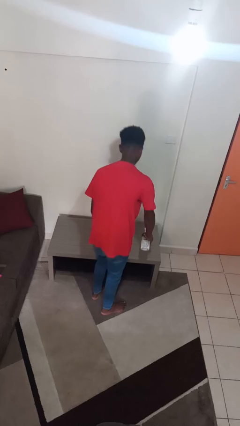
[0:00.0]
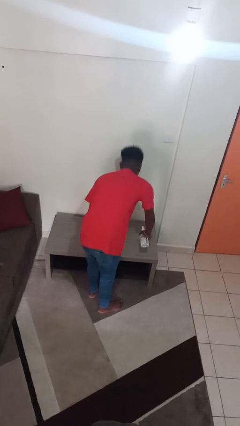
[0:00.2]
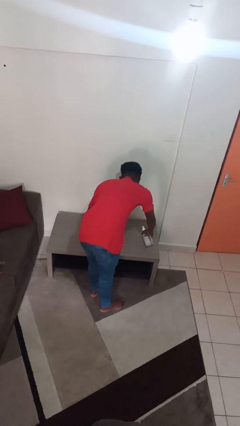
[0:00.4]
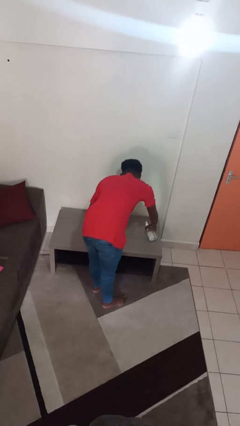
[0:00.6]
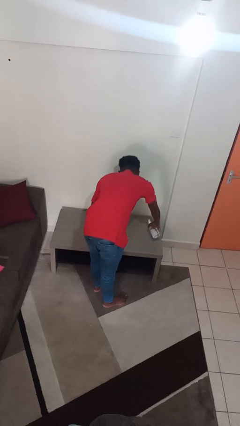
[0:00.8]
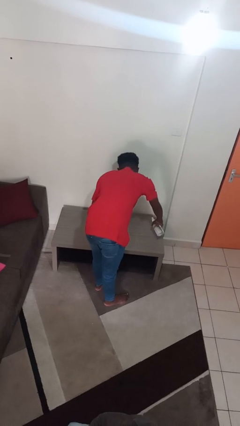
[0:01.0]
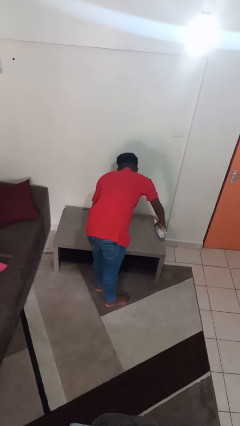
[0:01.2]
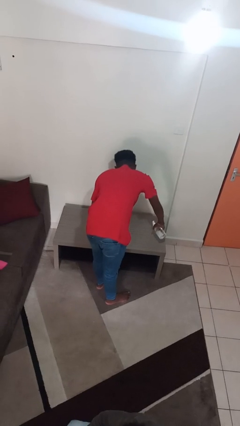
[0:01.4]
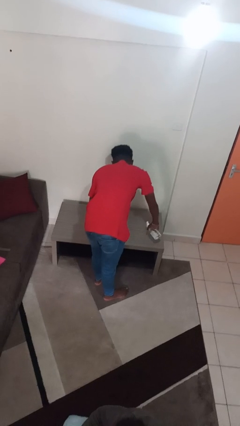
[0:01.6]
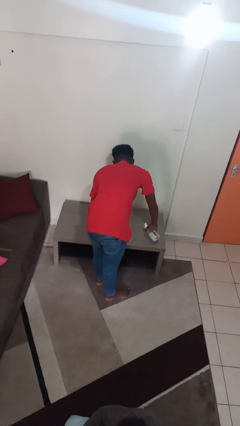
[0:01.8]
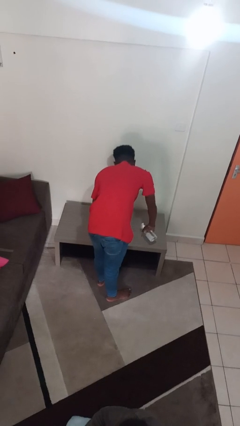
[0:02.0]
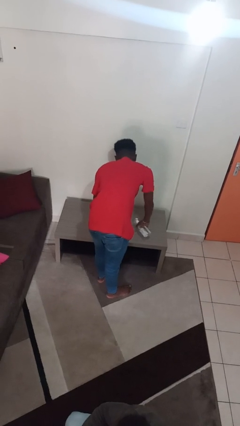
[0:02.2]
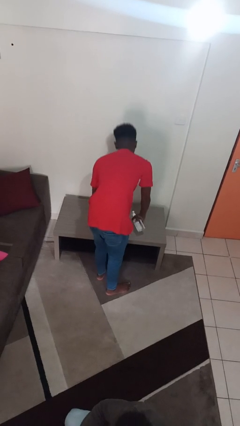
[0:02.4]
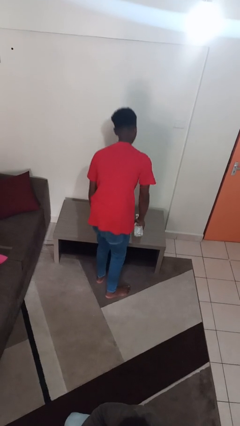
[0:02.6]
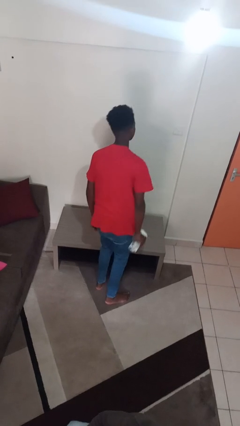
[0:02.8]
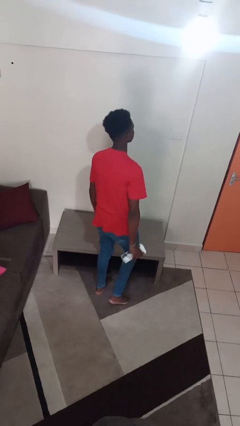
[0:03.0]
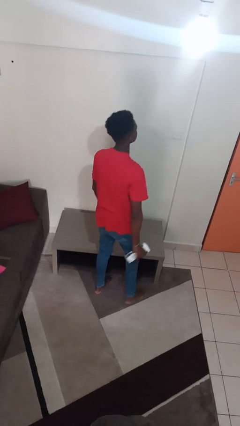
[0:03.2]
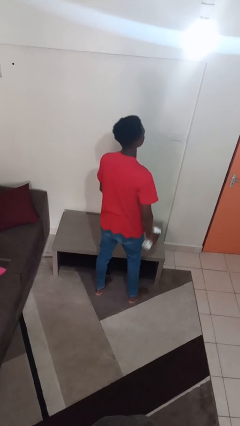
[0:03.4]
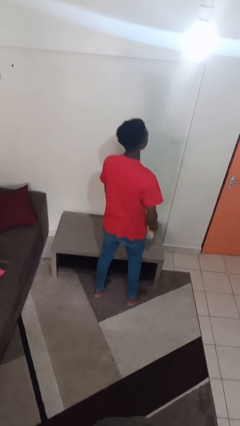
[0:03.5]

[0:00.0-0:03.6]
person sprays from bottle

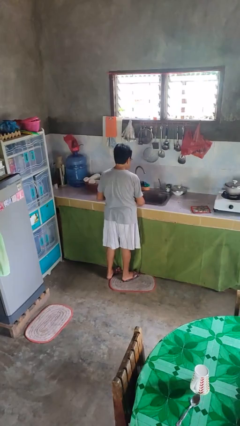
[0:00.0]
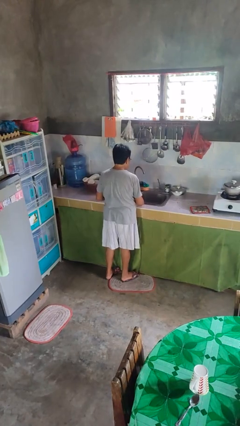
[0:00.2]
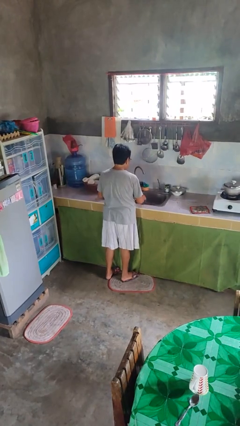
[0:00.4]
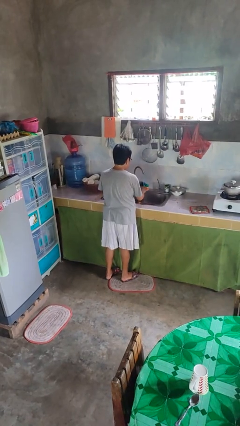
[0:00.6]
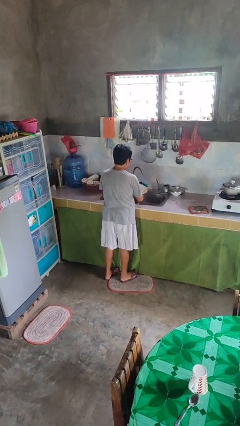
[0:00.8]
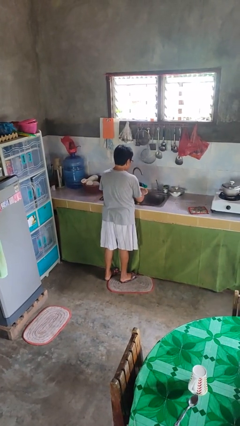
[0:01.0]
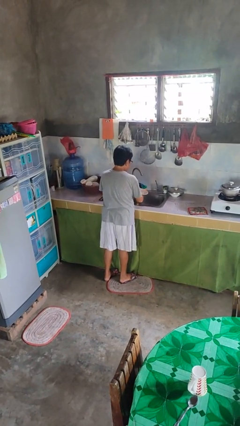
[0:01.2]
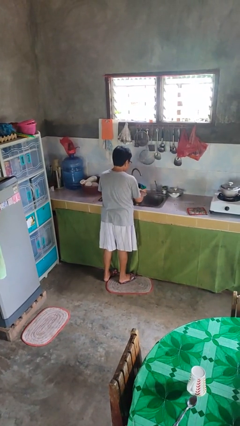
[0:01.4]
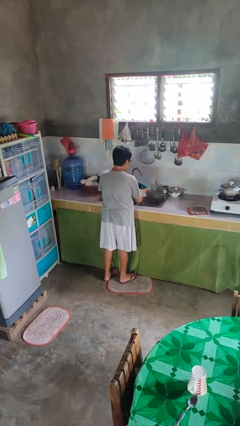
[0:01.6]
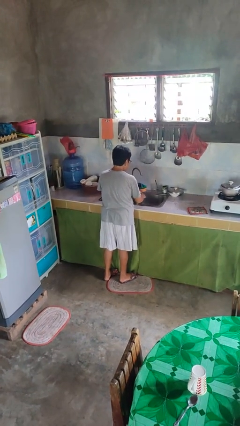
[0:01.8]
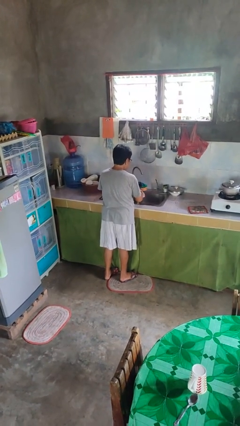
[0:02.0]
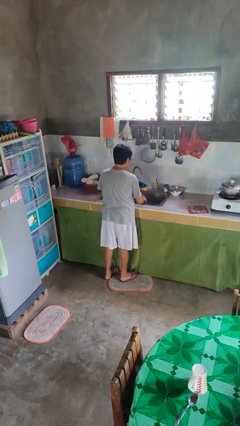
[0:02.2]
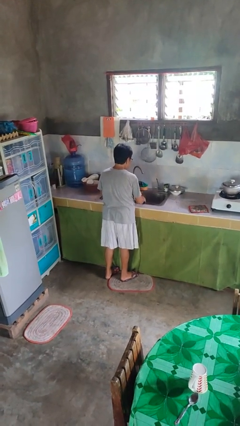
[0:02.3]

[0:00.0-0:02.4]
person washes dish

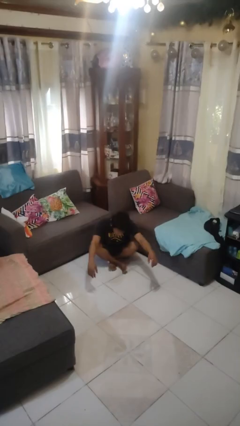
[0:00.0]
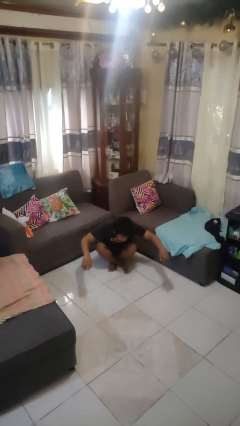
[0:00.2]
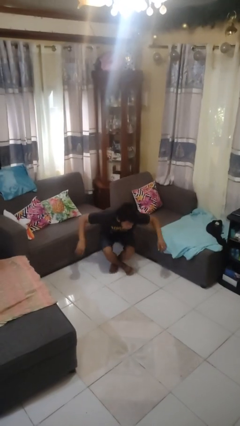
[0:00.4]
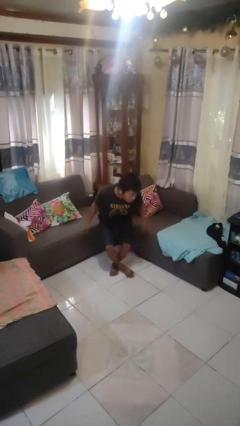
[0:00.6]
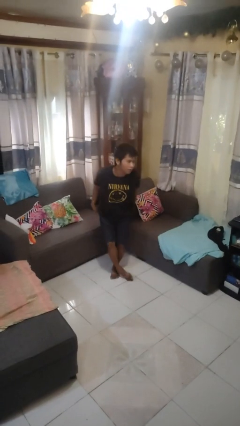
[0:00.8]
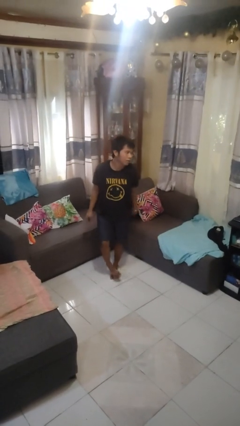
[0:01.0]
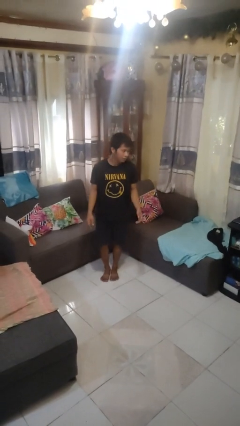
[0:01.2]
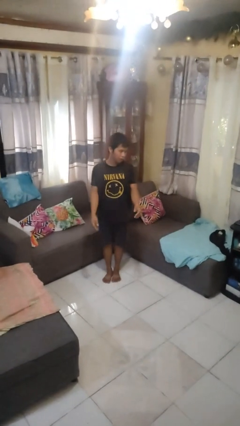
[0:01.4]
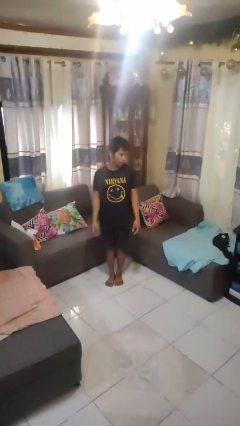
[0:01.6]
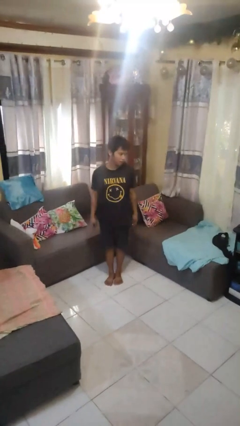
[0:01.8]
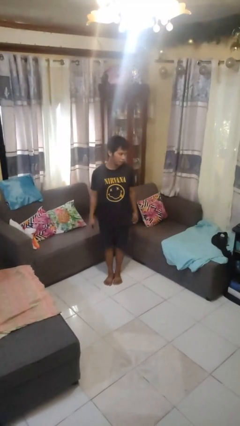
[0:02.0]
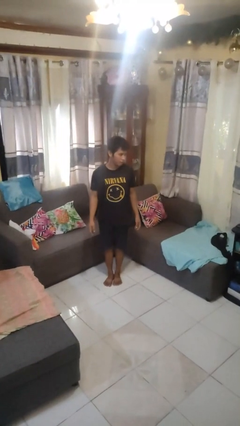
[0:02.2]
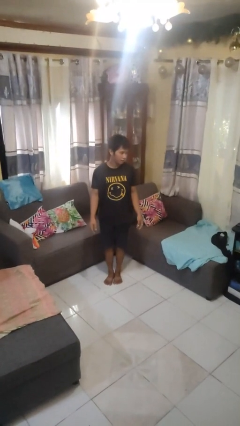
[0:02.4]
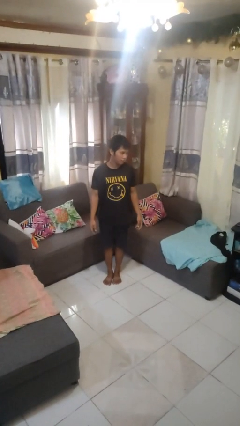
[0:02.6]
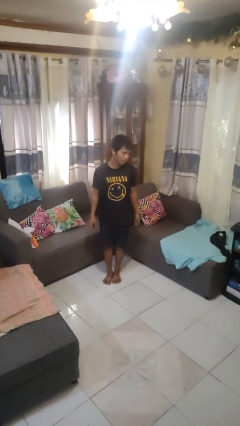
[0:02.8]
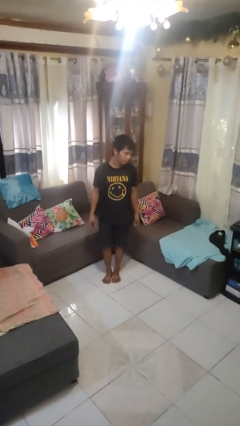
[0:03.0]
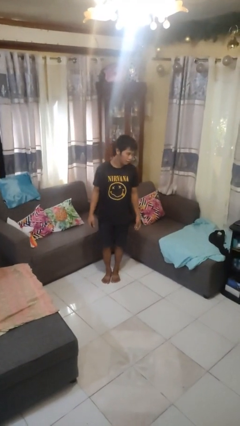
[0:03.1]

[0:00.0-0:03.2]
person stands up from floor

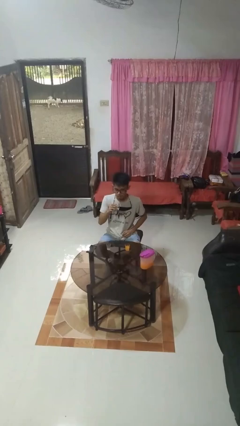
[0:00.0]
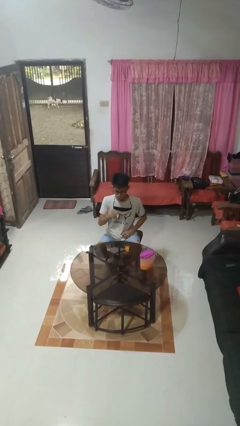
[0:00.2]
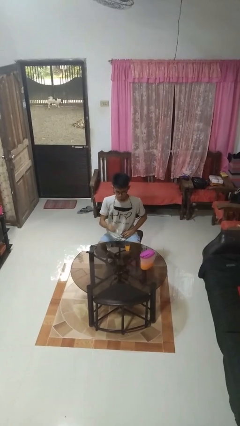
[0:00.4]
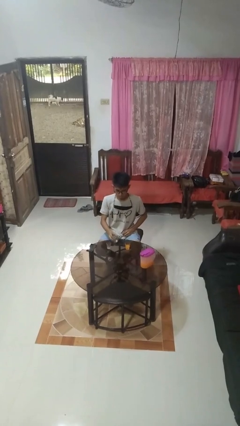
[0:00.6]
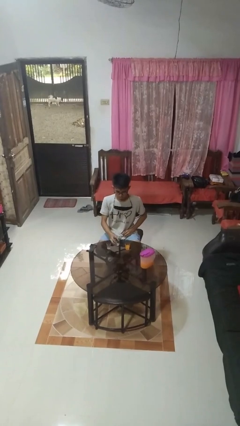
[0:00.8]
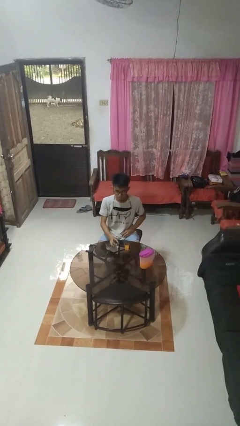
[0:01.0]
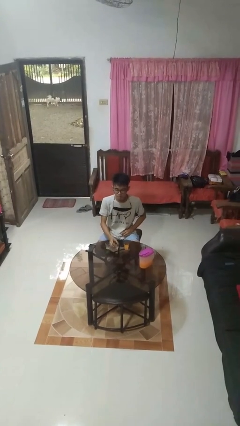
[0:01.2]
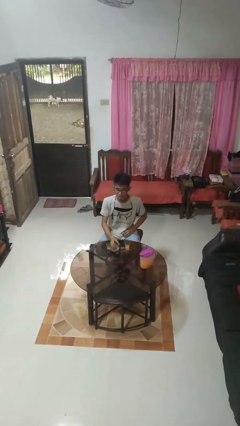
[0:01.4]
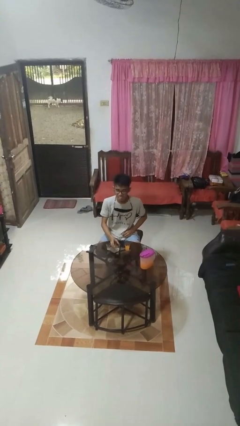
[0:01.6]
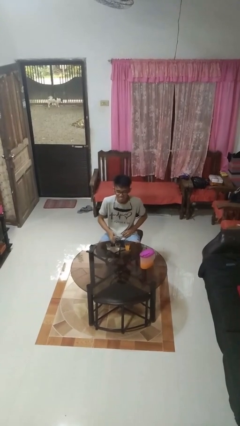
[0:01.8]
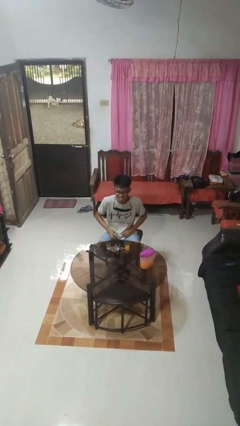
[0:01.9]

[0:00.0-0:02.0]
person puts down object on table

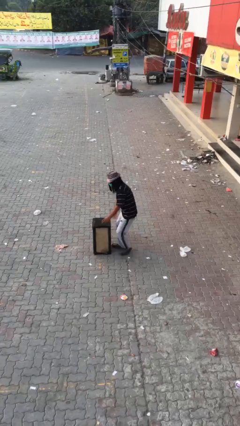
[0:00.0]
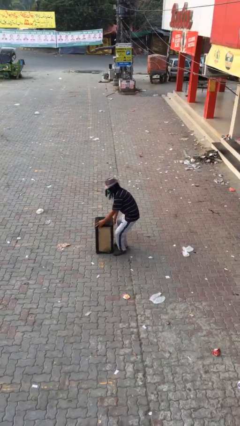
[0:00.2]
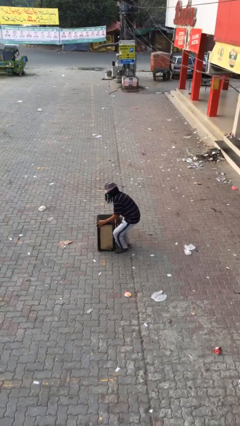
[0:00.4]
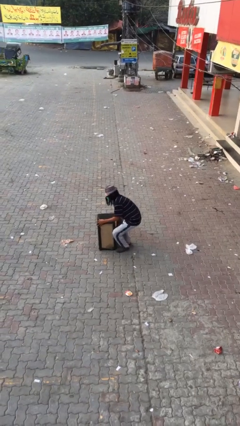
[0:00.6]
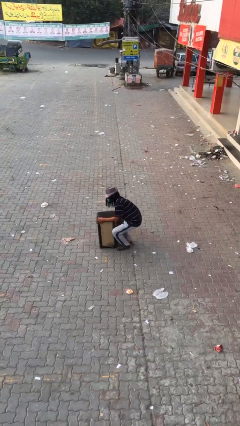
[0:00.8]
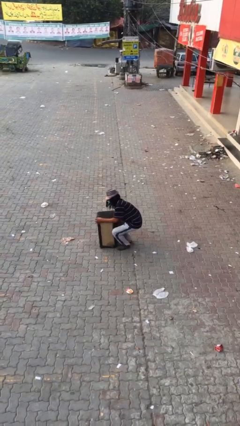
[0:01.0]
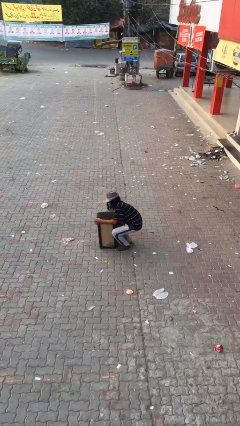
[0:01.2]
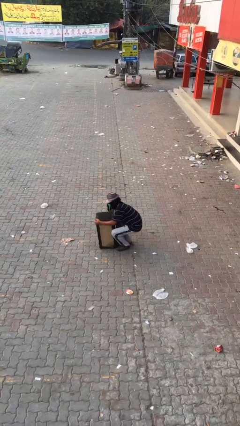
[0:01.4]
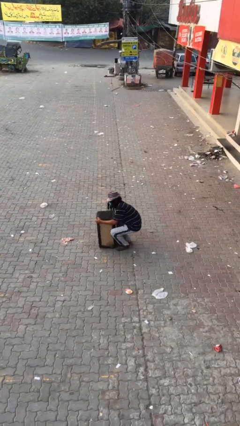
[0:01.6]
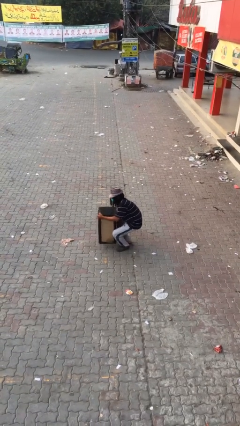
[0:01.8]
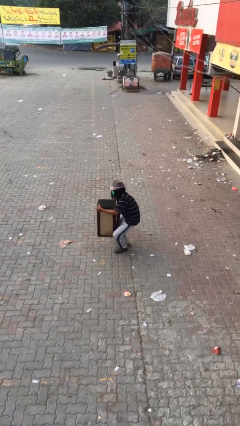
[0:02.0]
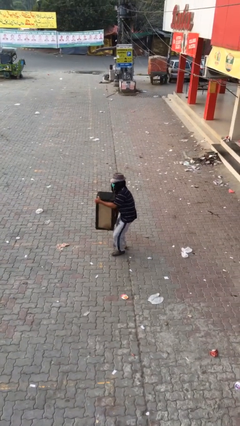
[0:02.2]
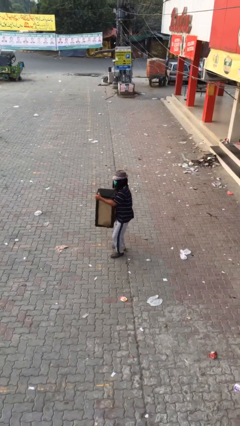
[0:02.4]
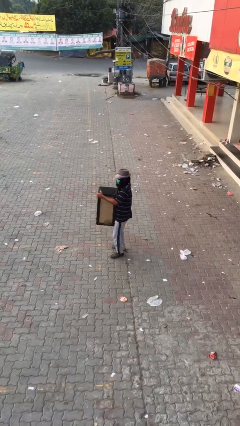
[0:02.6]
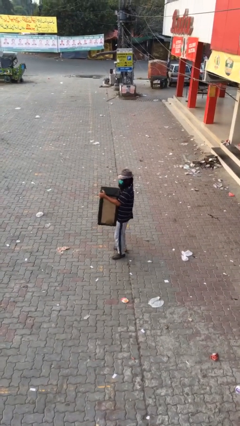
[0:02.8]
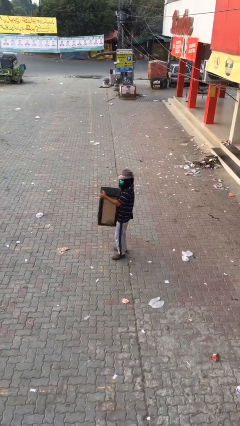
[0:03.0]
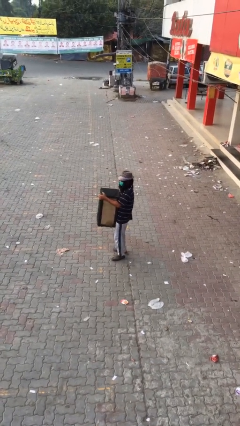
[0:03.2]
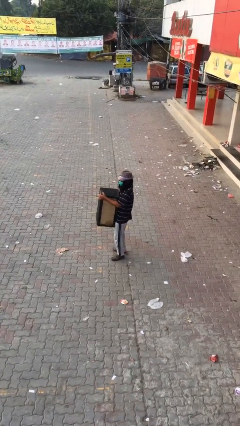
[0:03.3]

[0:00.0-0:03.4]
person picks up object from floor

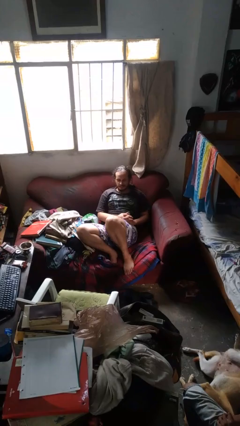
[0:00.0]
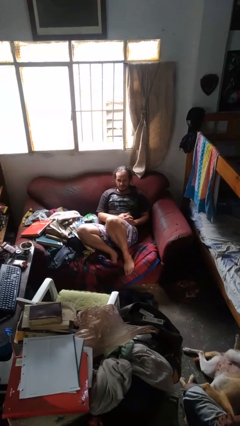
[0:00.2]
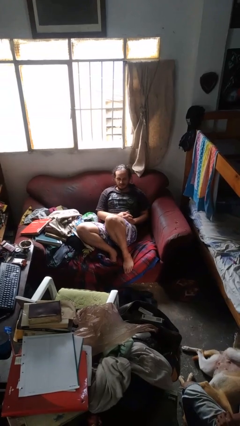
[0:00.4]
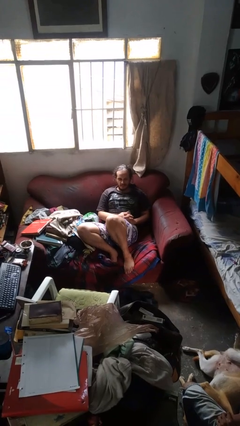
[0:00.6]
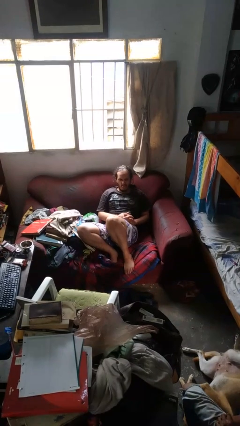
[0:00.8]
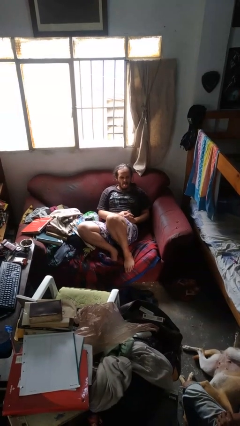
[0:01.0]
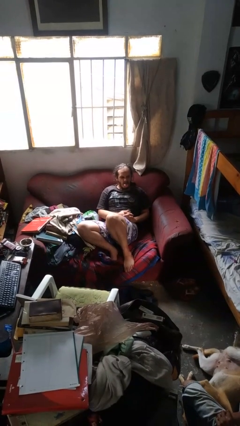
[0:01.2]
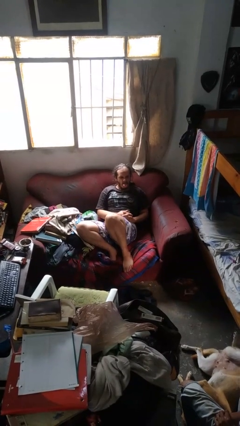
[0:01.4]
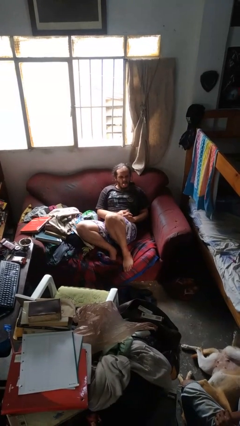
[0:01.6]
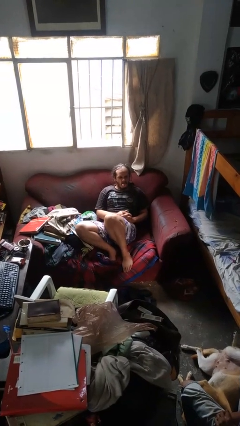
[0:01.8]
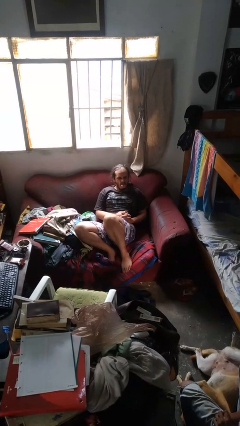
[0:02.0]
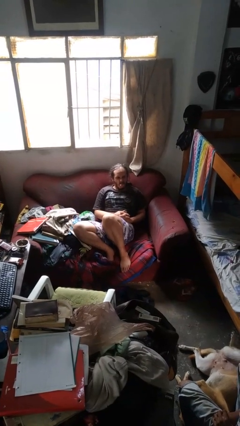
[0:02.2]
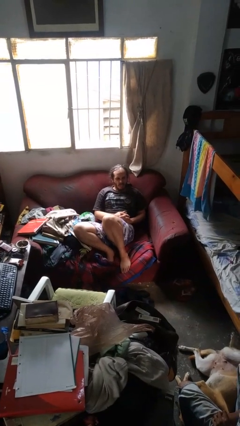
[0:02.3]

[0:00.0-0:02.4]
person sticks out tongue
